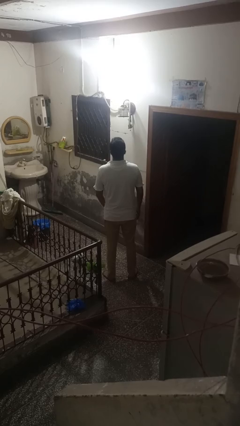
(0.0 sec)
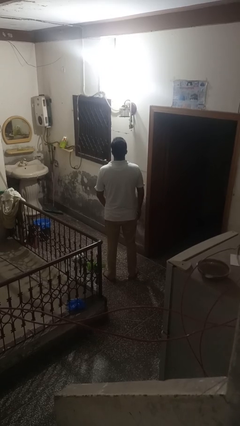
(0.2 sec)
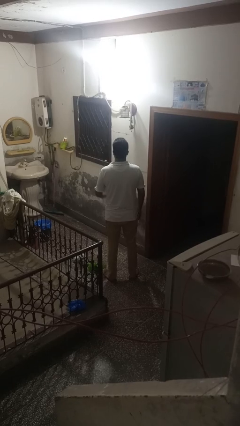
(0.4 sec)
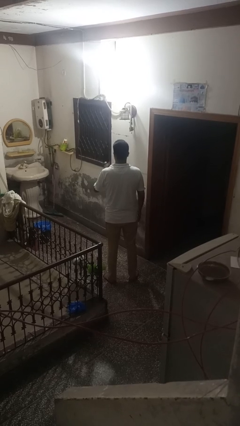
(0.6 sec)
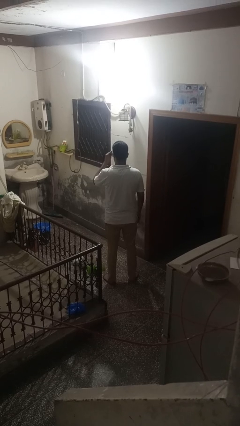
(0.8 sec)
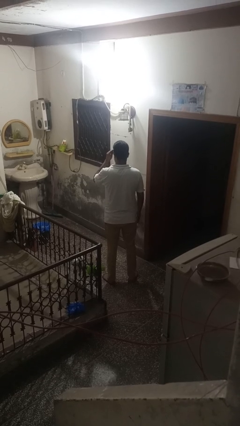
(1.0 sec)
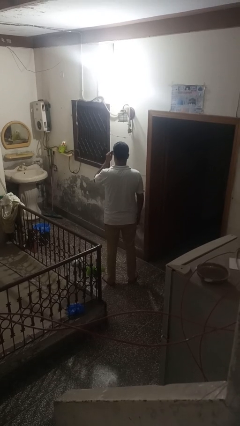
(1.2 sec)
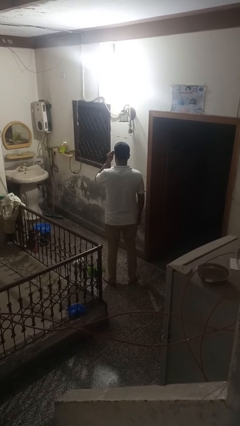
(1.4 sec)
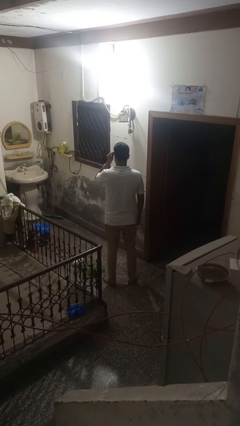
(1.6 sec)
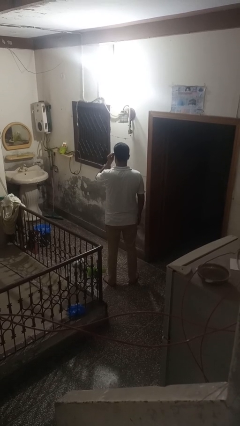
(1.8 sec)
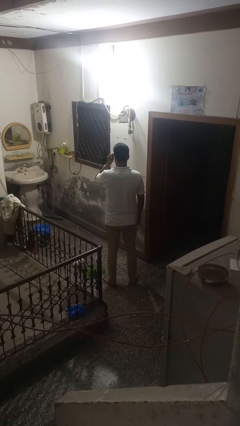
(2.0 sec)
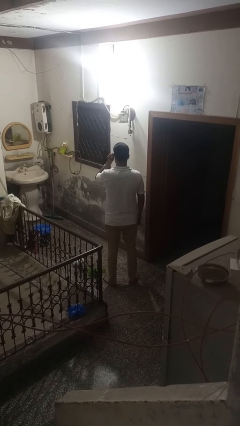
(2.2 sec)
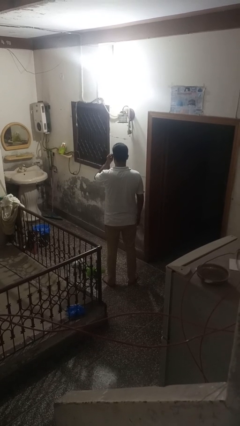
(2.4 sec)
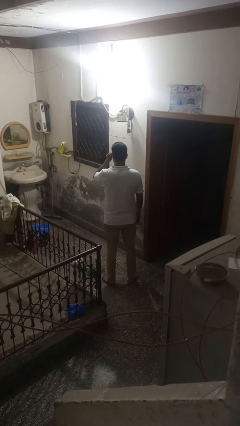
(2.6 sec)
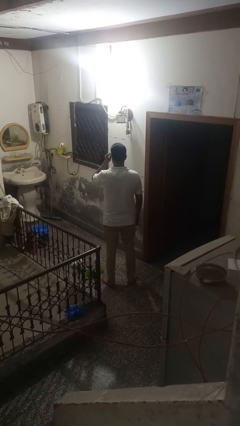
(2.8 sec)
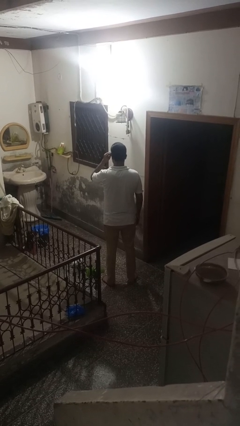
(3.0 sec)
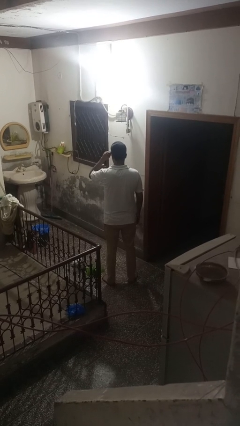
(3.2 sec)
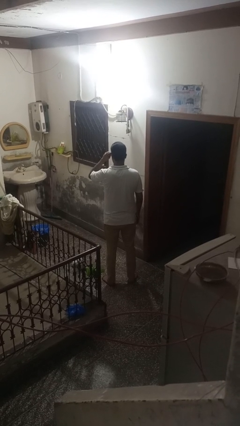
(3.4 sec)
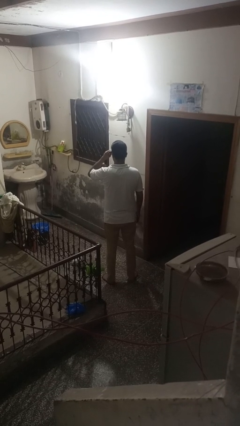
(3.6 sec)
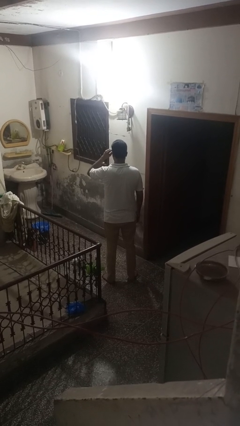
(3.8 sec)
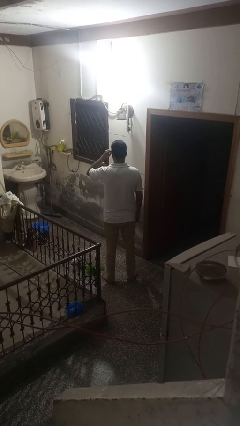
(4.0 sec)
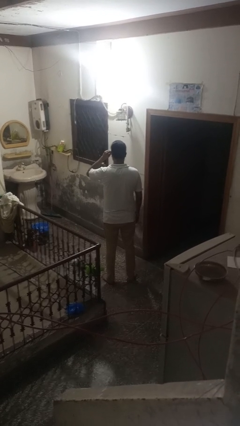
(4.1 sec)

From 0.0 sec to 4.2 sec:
person puts on sunglasses

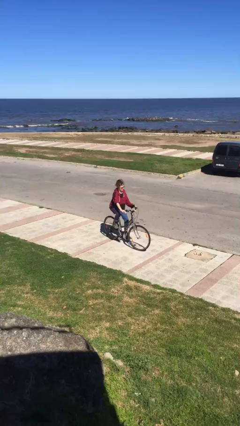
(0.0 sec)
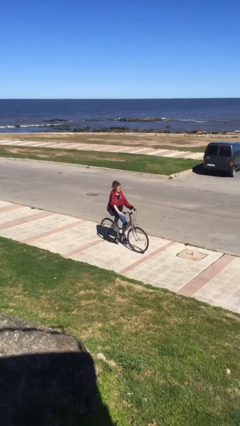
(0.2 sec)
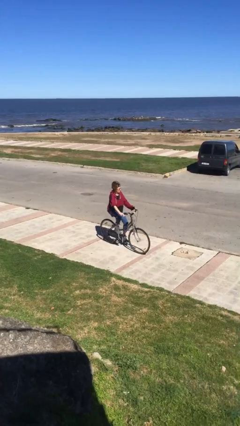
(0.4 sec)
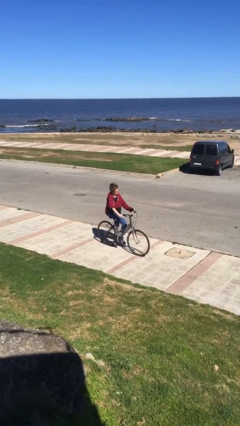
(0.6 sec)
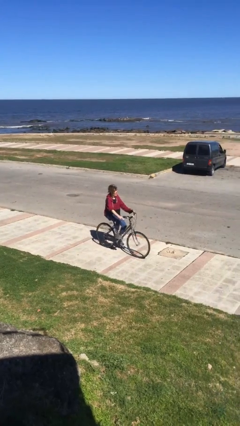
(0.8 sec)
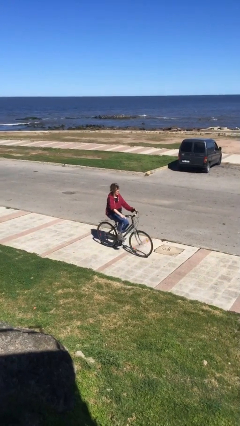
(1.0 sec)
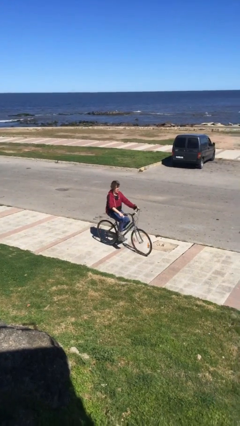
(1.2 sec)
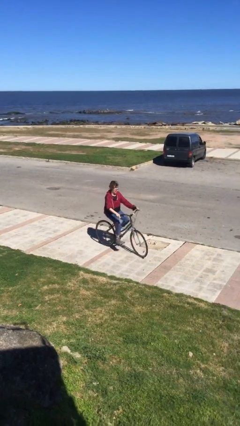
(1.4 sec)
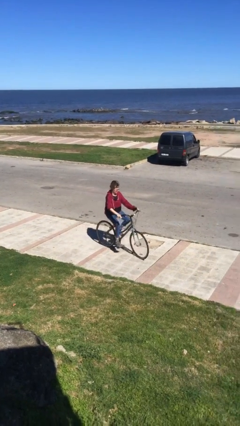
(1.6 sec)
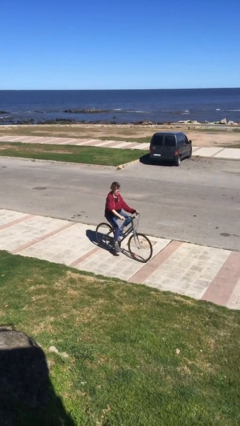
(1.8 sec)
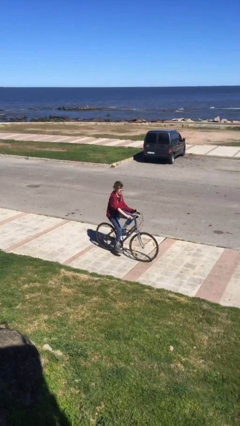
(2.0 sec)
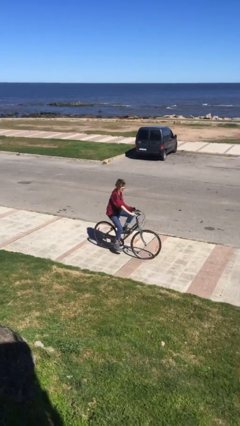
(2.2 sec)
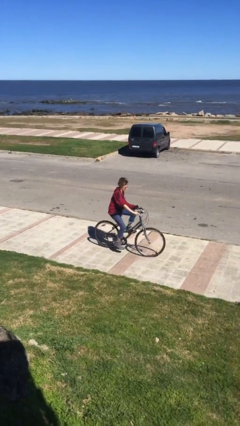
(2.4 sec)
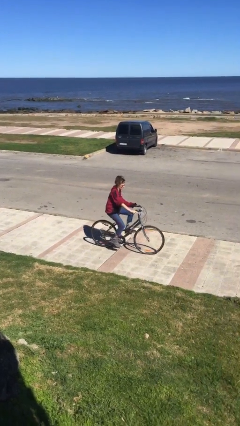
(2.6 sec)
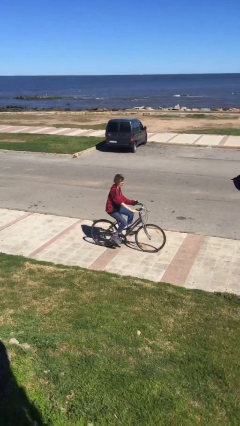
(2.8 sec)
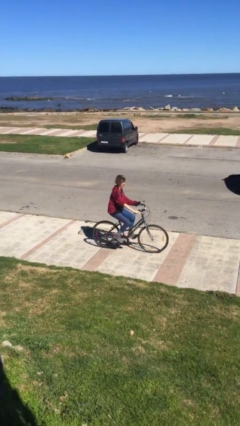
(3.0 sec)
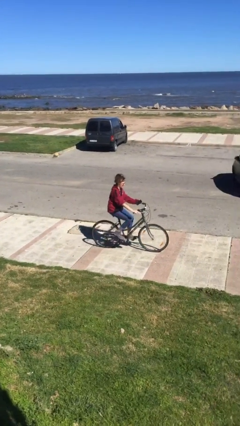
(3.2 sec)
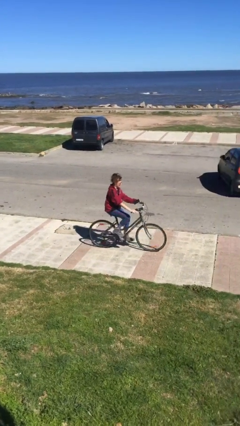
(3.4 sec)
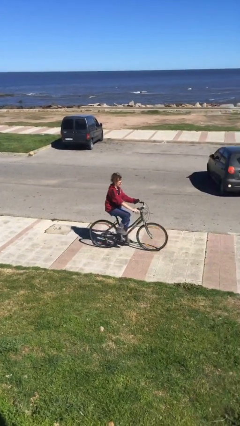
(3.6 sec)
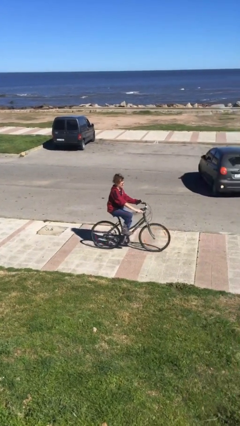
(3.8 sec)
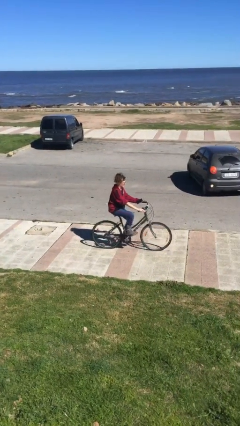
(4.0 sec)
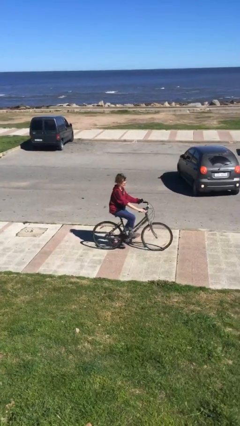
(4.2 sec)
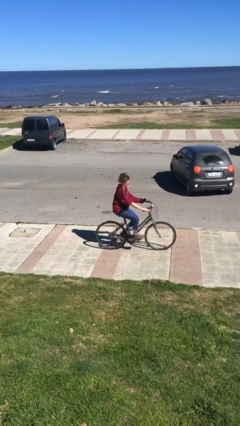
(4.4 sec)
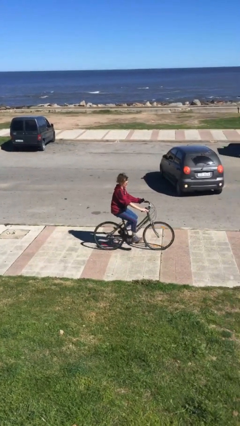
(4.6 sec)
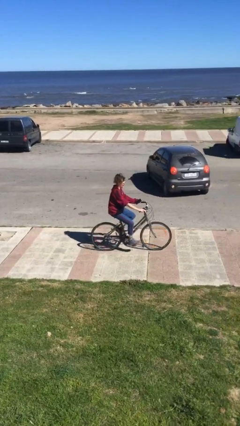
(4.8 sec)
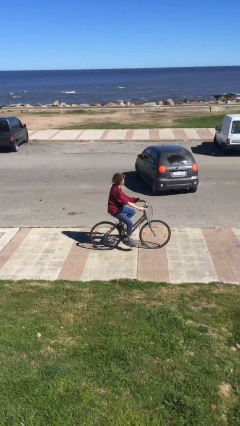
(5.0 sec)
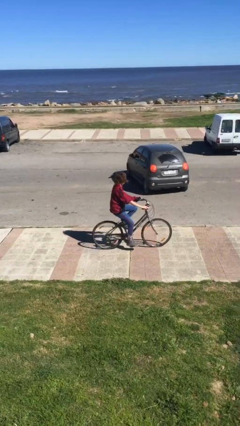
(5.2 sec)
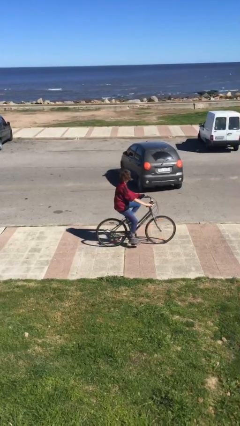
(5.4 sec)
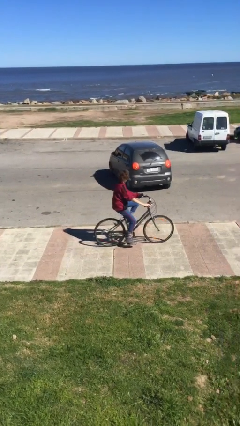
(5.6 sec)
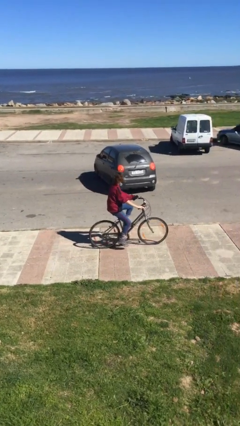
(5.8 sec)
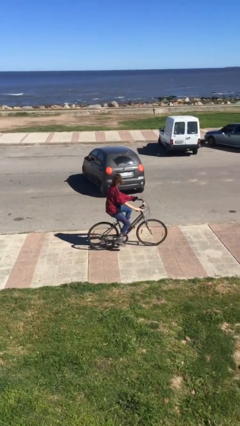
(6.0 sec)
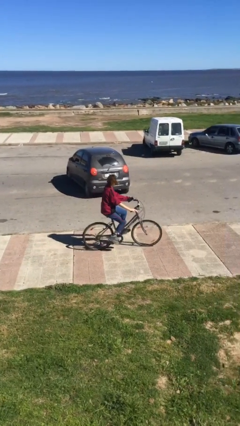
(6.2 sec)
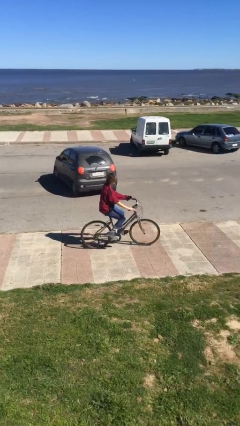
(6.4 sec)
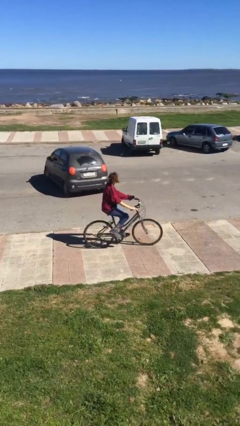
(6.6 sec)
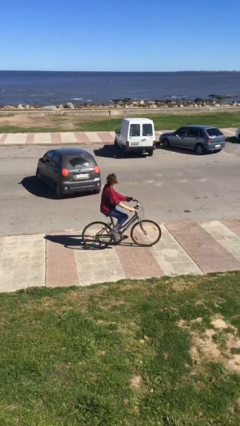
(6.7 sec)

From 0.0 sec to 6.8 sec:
person rides bicycle

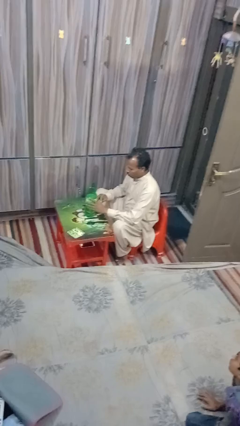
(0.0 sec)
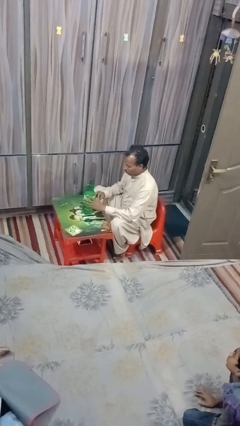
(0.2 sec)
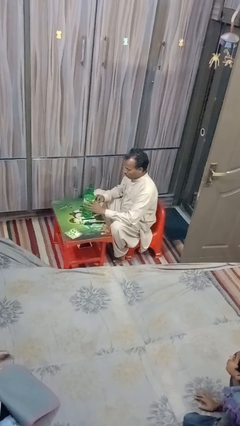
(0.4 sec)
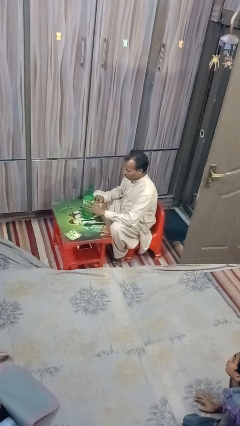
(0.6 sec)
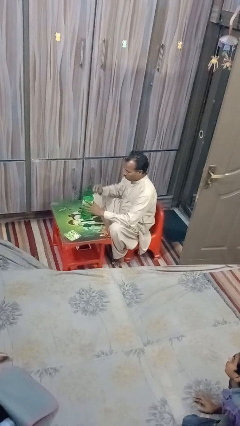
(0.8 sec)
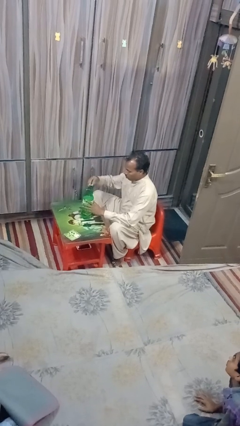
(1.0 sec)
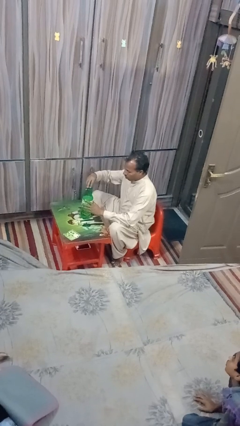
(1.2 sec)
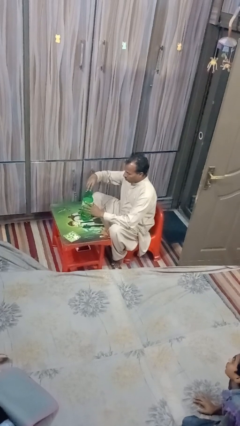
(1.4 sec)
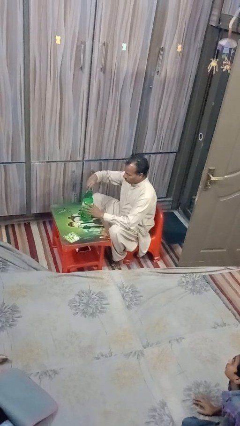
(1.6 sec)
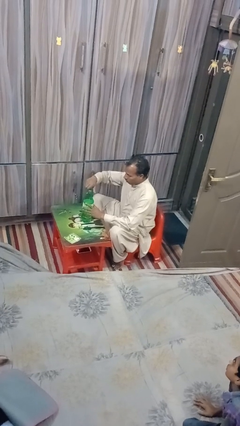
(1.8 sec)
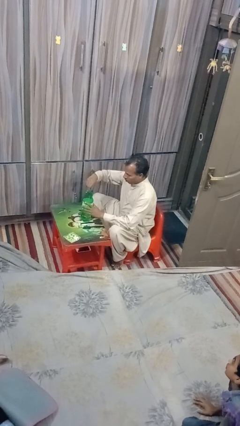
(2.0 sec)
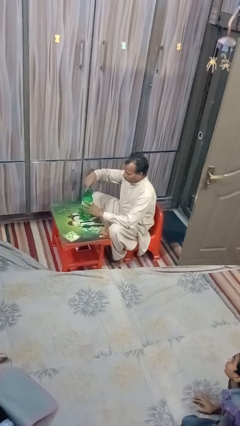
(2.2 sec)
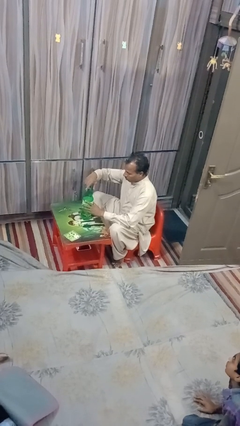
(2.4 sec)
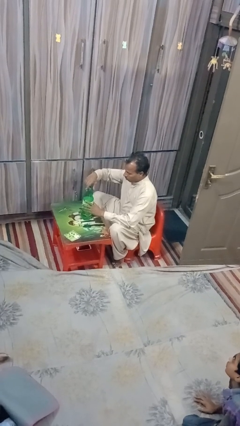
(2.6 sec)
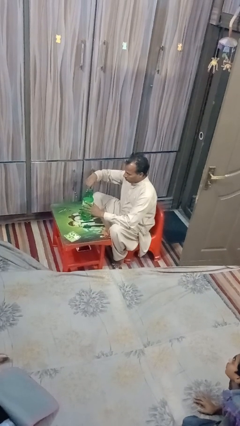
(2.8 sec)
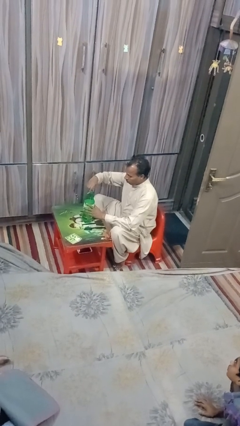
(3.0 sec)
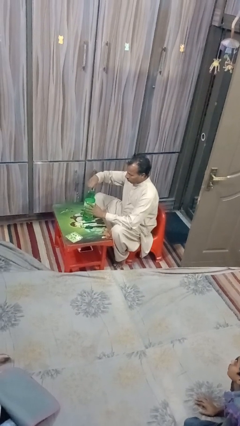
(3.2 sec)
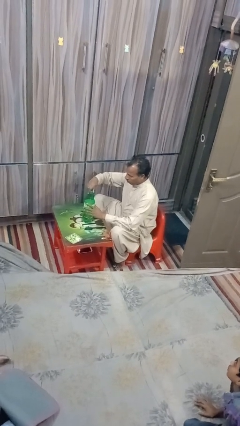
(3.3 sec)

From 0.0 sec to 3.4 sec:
person screws lid to bottle

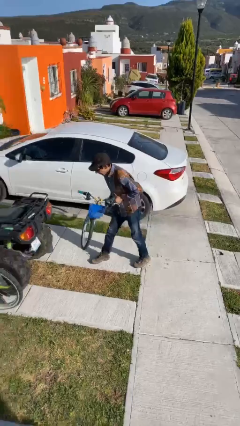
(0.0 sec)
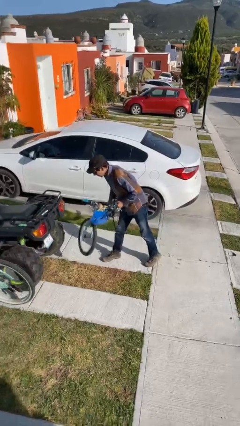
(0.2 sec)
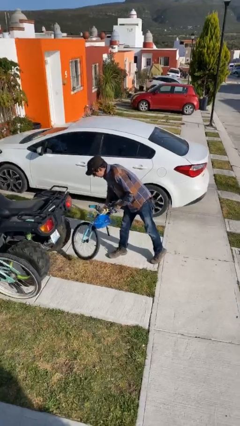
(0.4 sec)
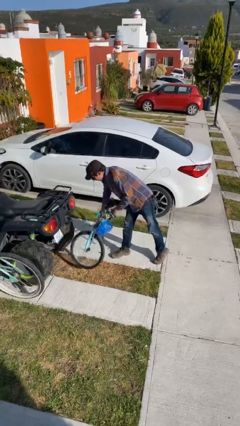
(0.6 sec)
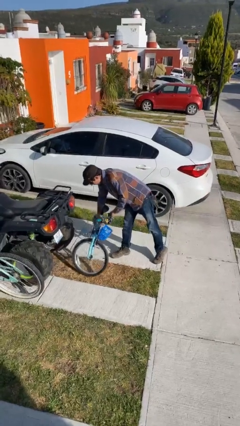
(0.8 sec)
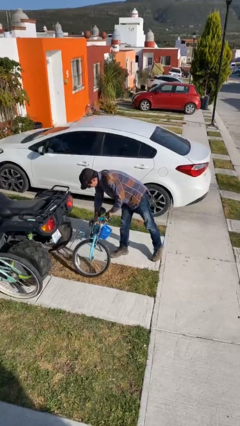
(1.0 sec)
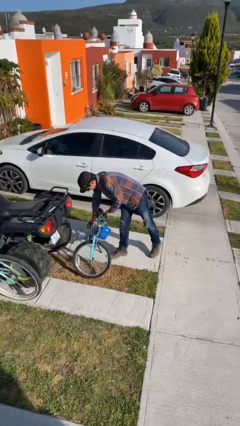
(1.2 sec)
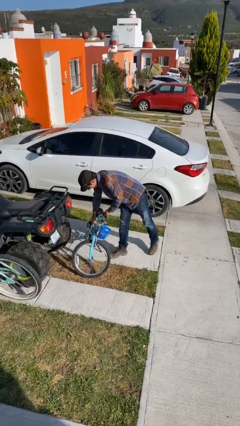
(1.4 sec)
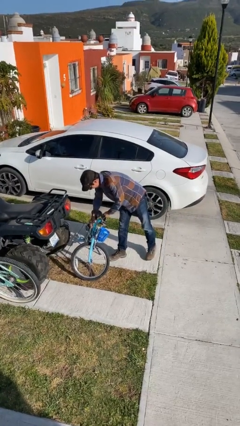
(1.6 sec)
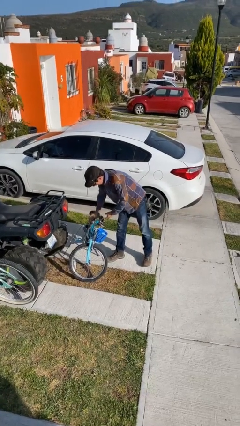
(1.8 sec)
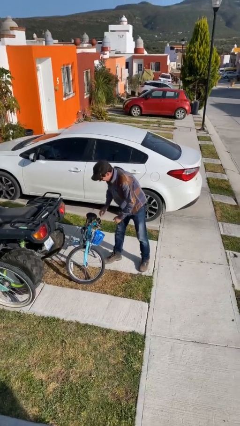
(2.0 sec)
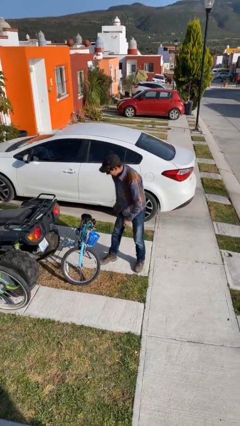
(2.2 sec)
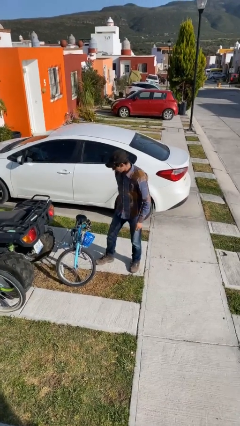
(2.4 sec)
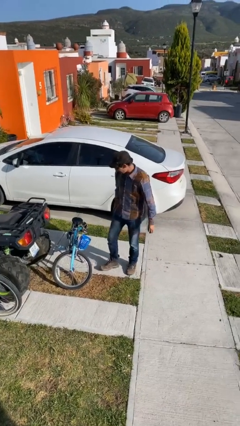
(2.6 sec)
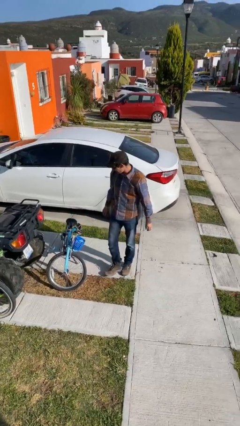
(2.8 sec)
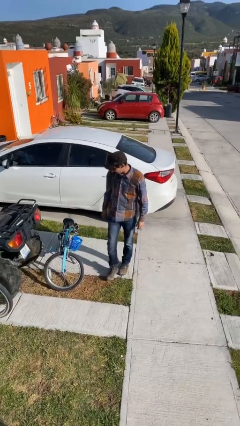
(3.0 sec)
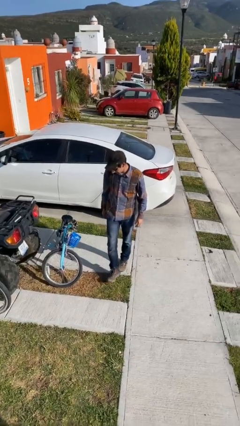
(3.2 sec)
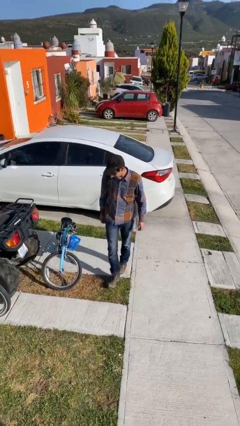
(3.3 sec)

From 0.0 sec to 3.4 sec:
person puts down object on floor
